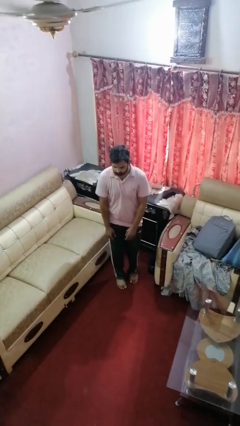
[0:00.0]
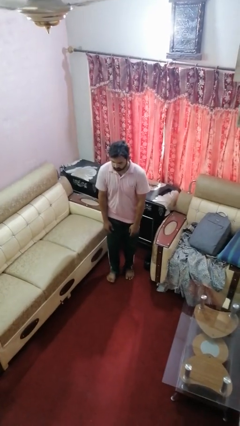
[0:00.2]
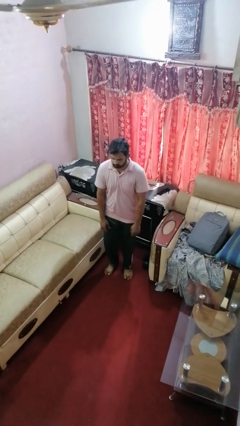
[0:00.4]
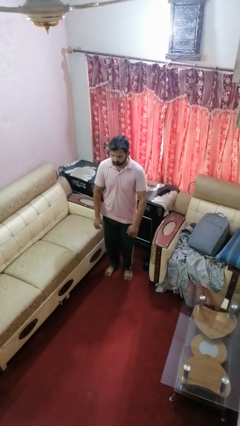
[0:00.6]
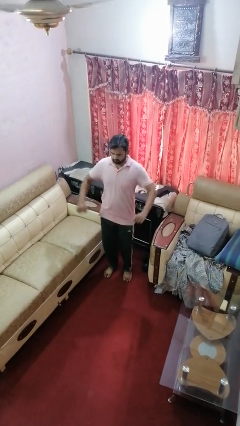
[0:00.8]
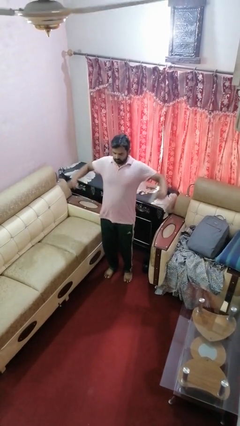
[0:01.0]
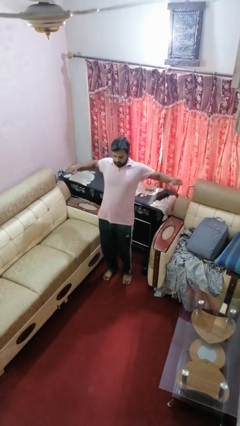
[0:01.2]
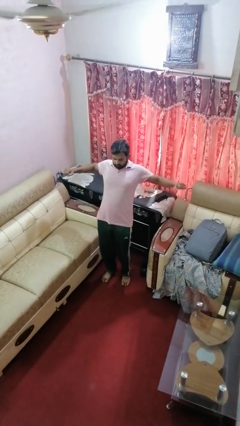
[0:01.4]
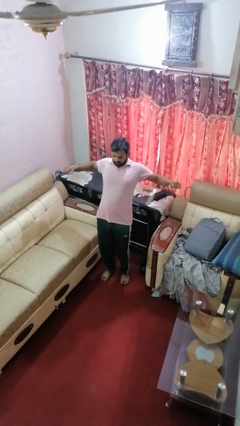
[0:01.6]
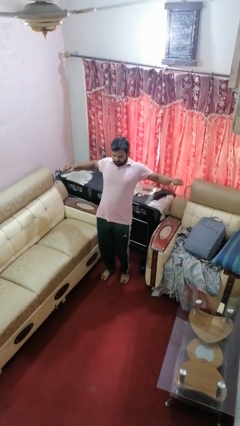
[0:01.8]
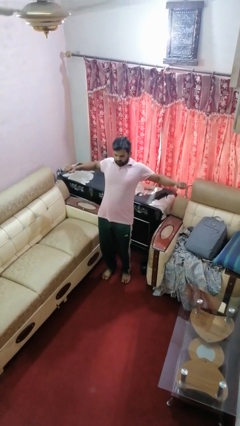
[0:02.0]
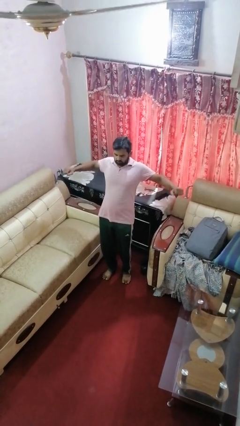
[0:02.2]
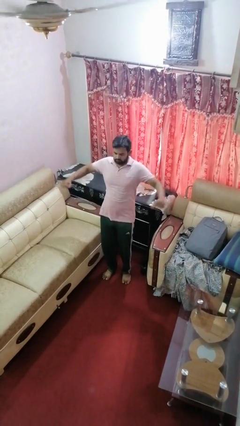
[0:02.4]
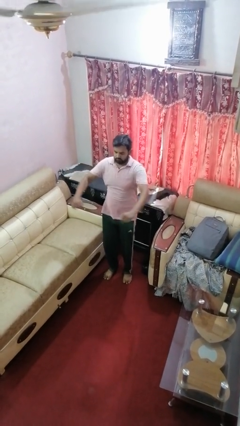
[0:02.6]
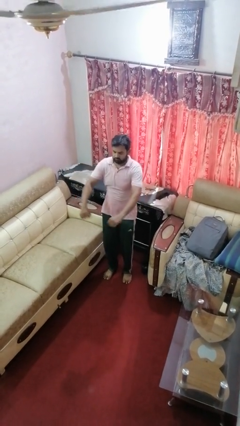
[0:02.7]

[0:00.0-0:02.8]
person stretches arms to side

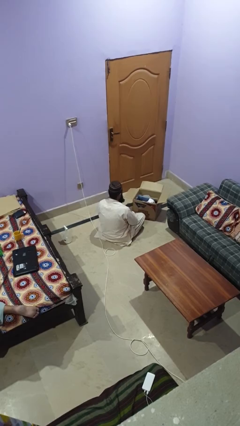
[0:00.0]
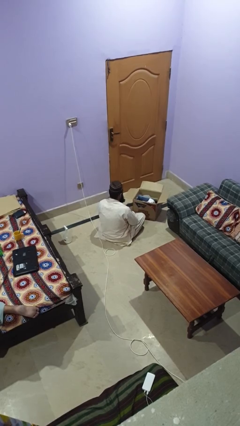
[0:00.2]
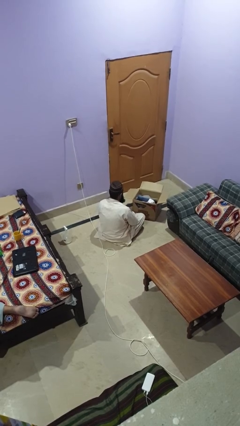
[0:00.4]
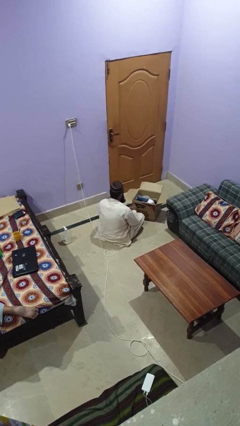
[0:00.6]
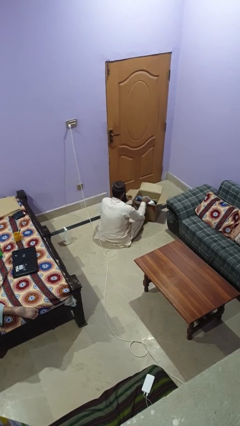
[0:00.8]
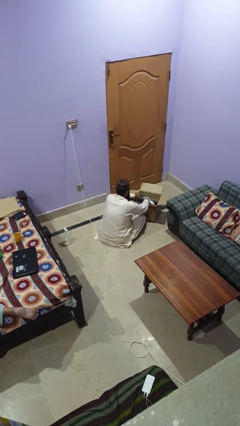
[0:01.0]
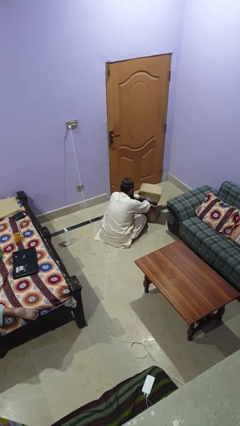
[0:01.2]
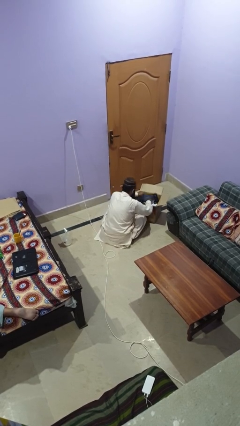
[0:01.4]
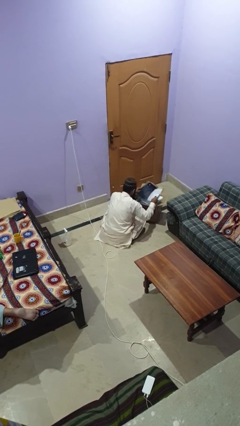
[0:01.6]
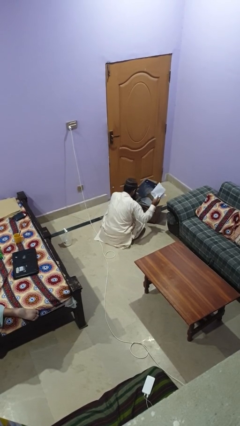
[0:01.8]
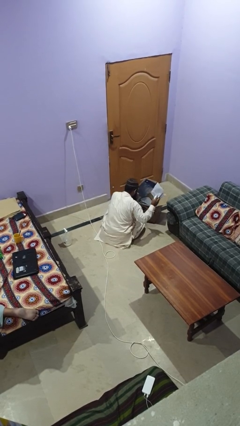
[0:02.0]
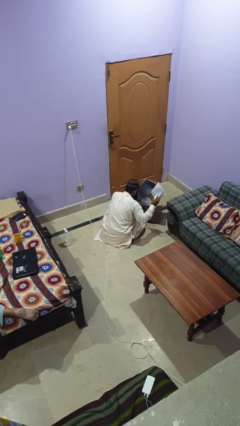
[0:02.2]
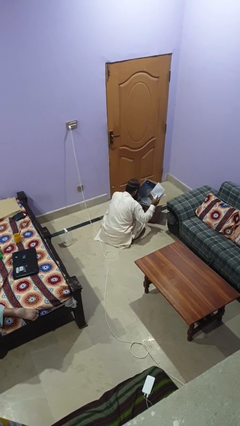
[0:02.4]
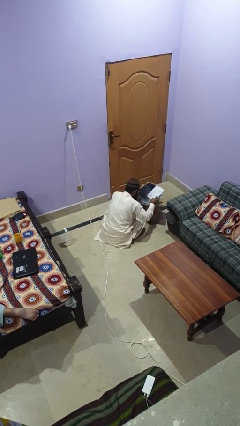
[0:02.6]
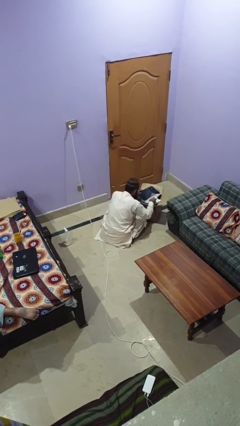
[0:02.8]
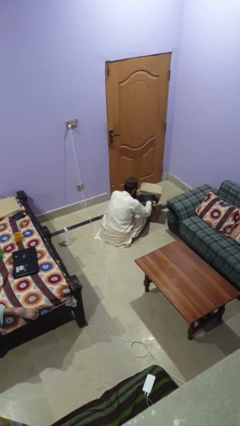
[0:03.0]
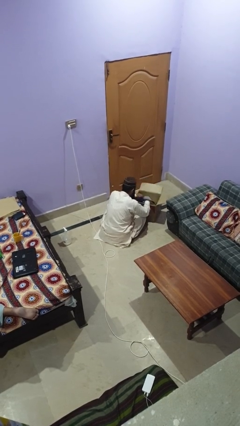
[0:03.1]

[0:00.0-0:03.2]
person searches in box

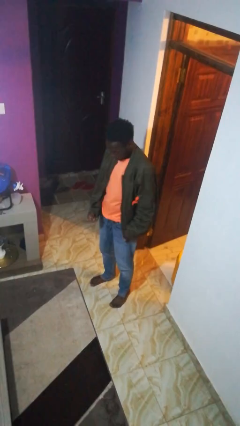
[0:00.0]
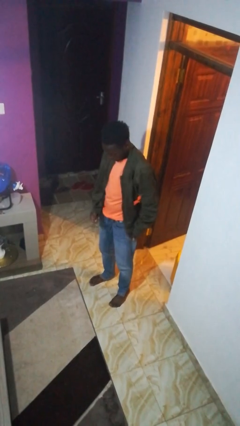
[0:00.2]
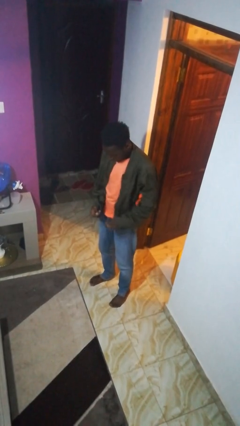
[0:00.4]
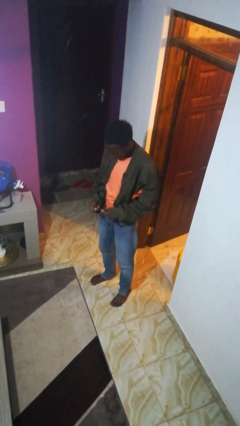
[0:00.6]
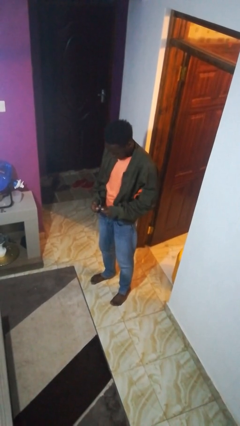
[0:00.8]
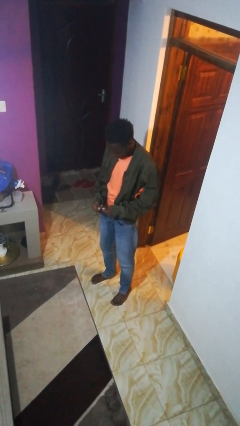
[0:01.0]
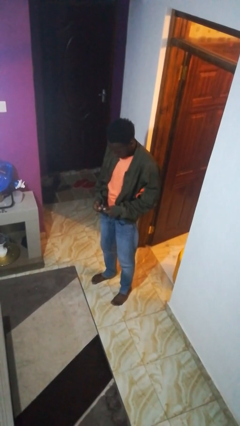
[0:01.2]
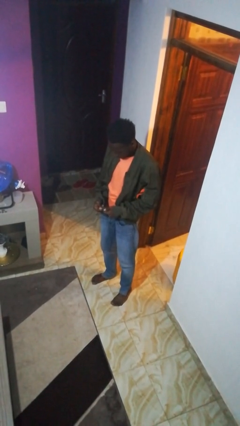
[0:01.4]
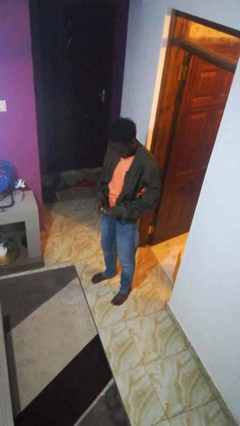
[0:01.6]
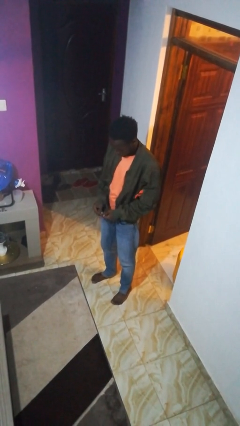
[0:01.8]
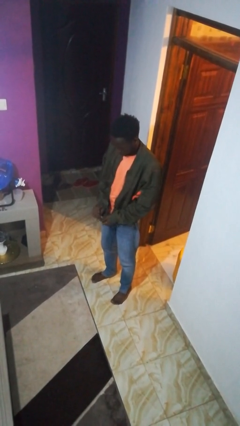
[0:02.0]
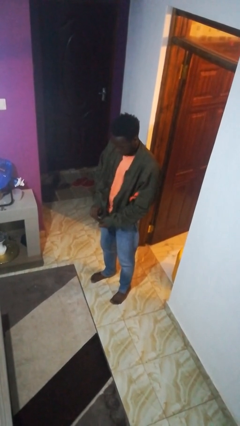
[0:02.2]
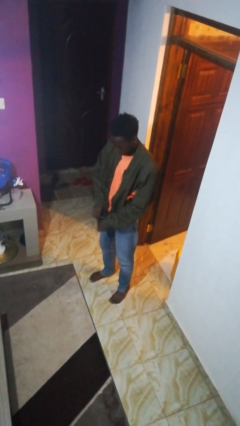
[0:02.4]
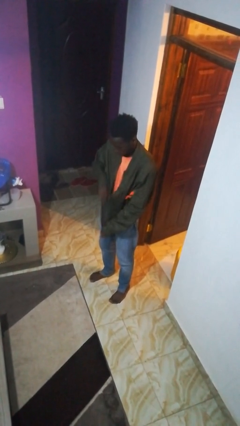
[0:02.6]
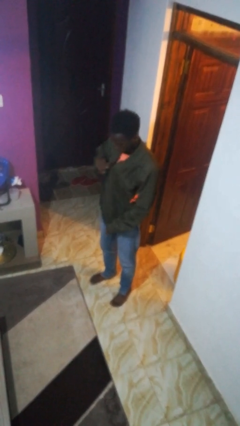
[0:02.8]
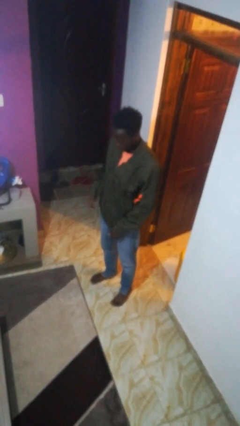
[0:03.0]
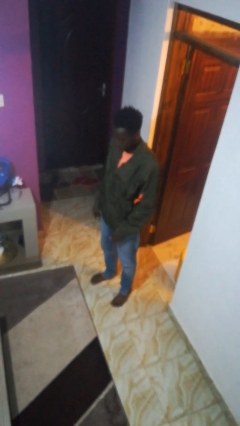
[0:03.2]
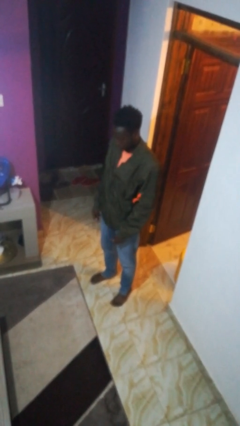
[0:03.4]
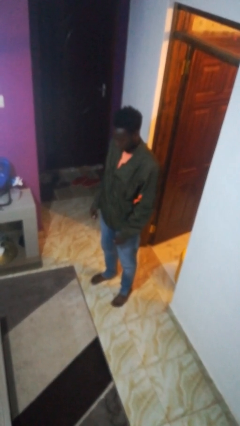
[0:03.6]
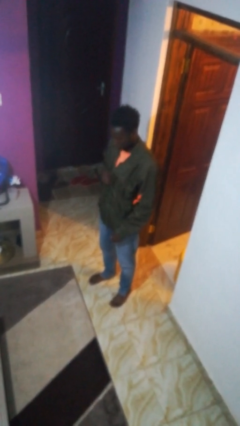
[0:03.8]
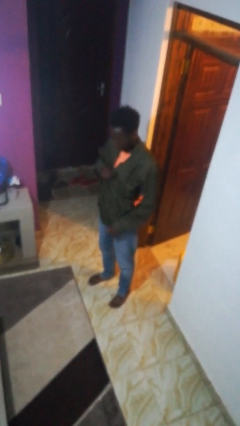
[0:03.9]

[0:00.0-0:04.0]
person zips up jacket

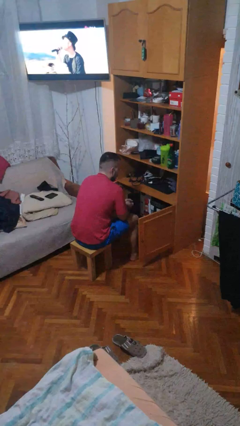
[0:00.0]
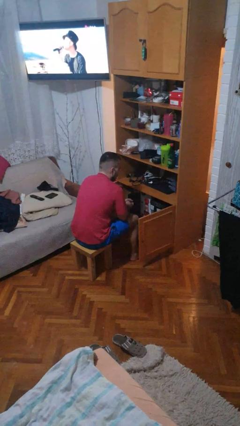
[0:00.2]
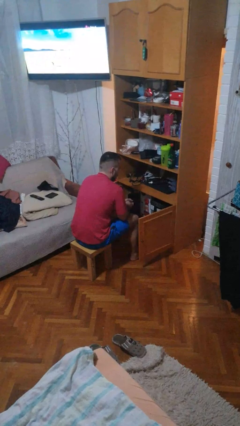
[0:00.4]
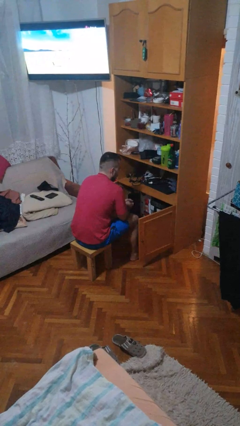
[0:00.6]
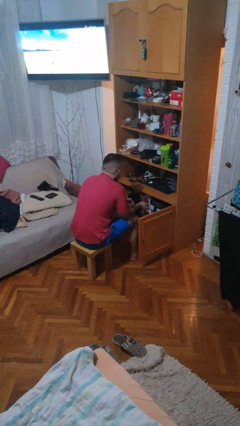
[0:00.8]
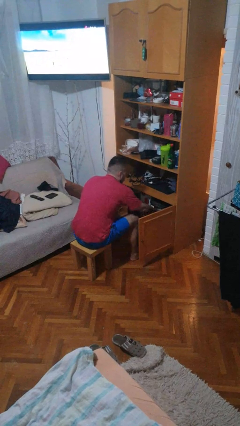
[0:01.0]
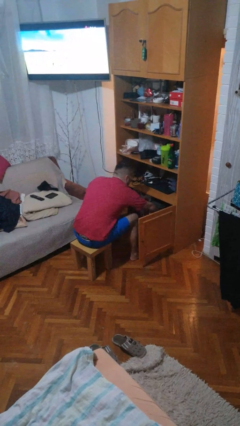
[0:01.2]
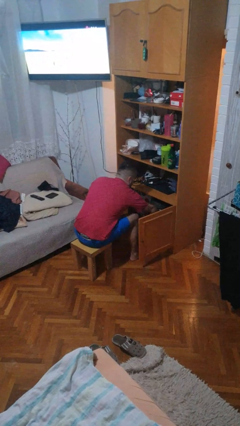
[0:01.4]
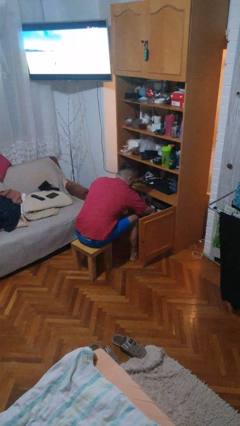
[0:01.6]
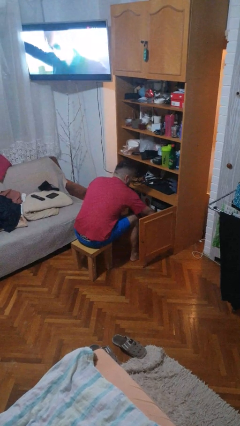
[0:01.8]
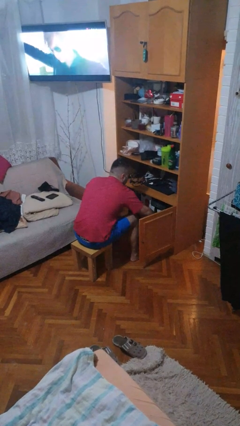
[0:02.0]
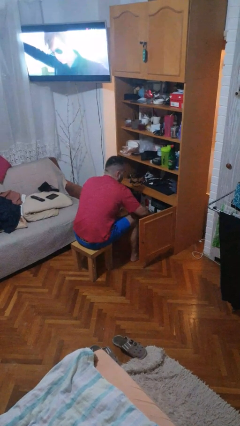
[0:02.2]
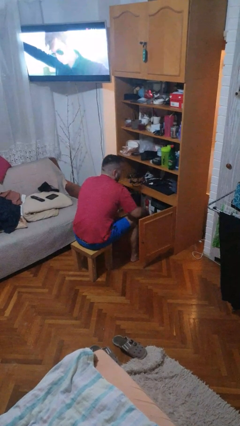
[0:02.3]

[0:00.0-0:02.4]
person searches in cabinet

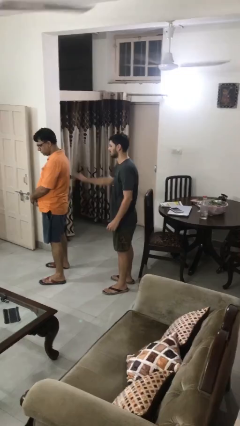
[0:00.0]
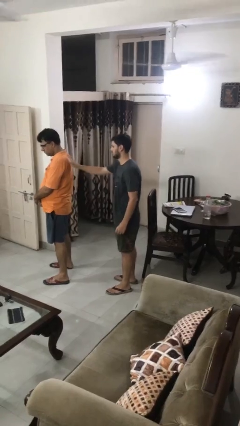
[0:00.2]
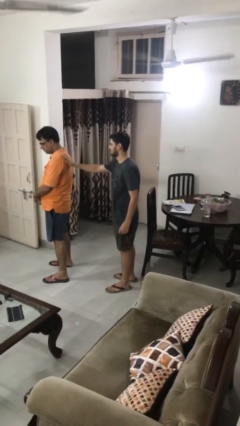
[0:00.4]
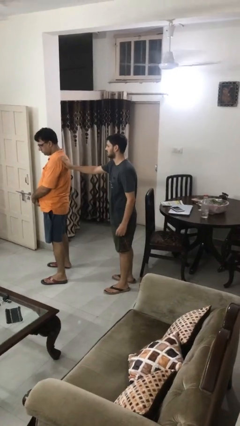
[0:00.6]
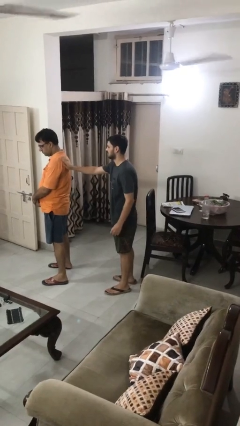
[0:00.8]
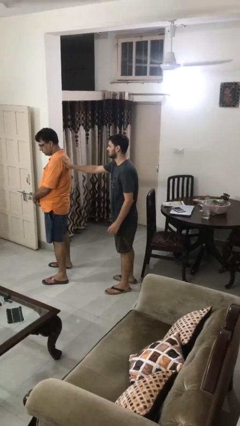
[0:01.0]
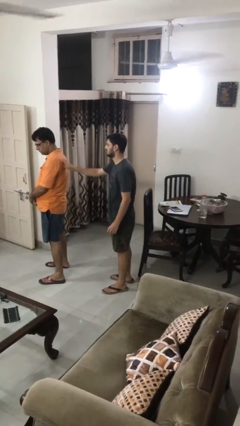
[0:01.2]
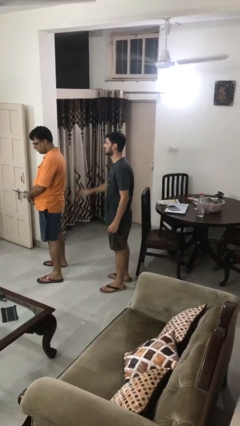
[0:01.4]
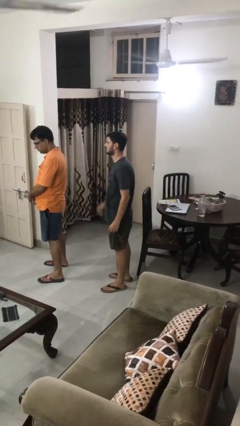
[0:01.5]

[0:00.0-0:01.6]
person touches back of person

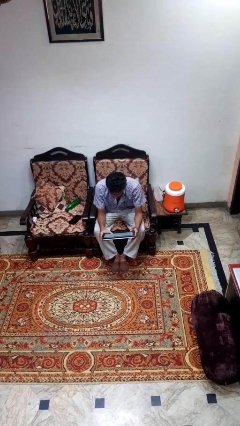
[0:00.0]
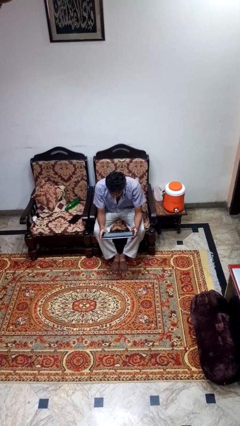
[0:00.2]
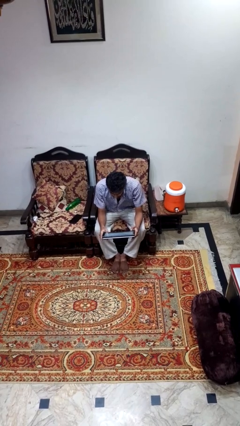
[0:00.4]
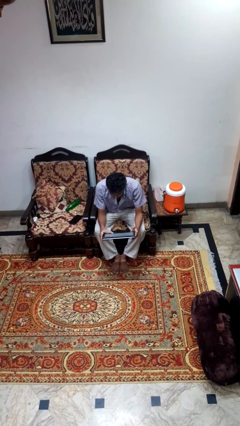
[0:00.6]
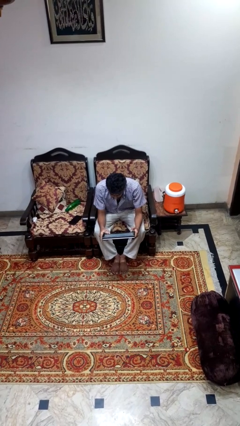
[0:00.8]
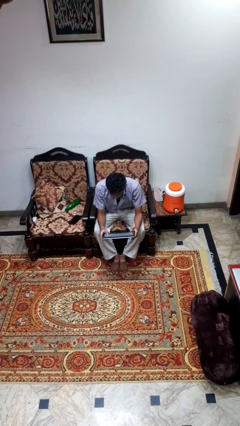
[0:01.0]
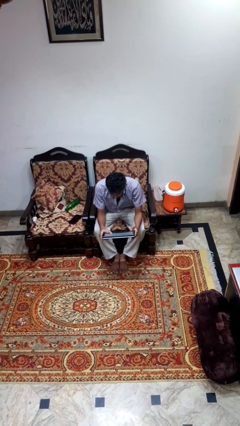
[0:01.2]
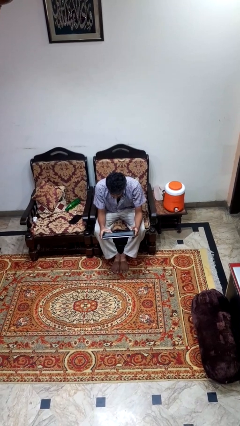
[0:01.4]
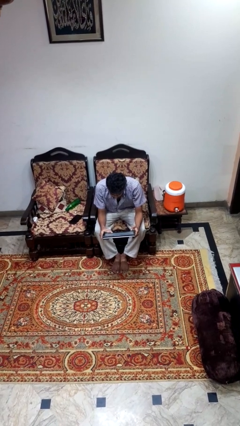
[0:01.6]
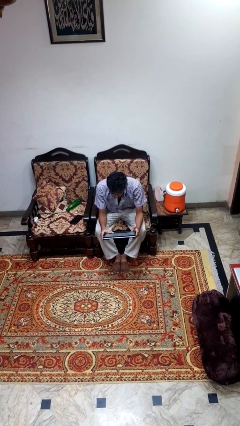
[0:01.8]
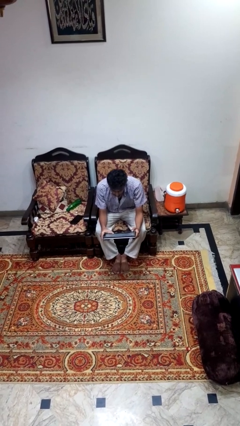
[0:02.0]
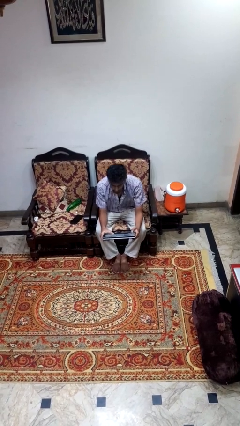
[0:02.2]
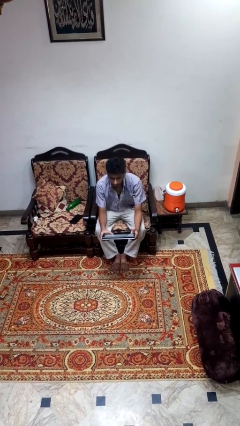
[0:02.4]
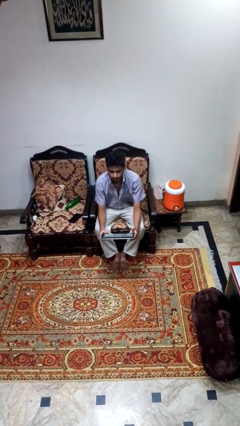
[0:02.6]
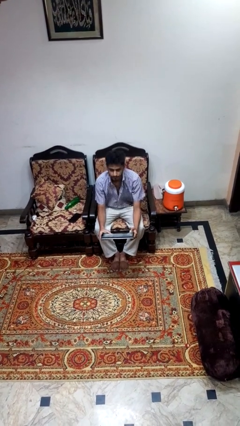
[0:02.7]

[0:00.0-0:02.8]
person reads newspaper
